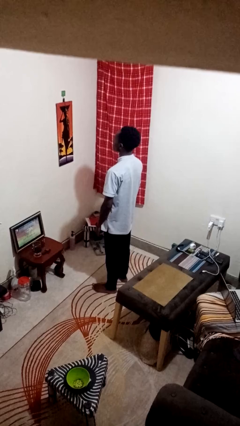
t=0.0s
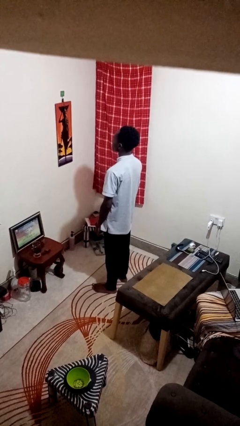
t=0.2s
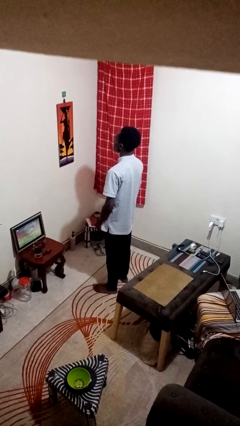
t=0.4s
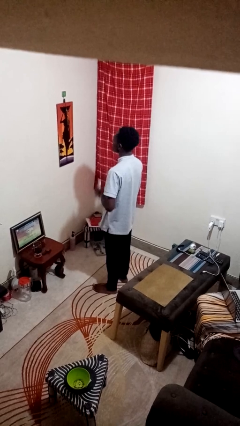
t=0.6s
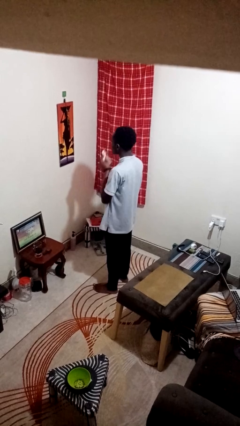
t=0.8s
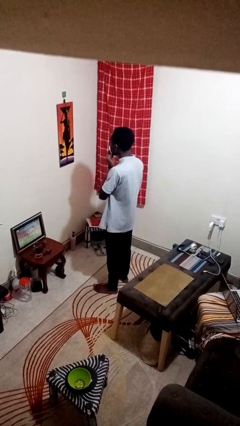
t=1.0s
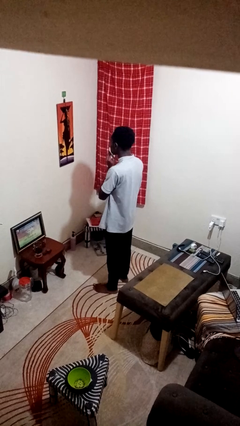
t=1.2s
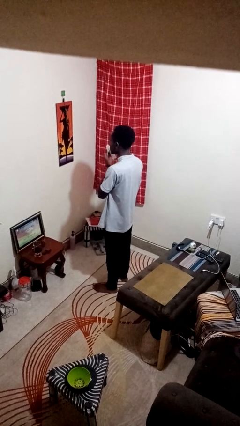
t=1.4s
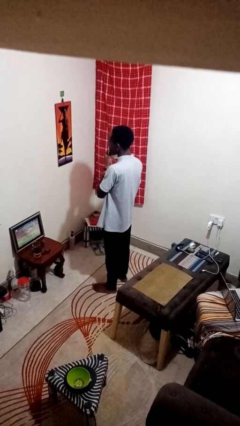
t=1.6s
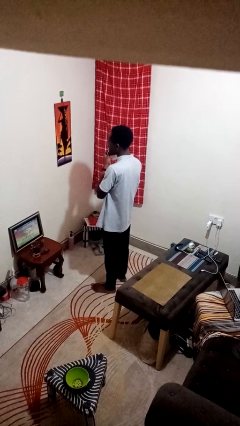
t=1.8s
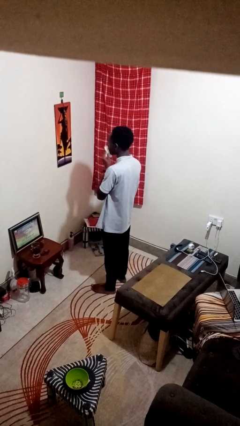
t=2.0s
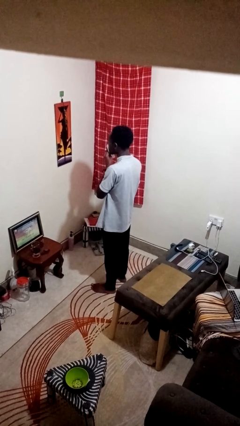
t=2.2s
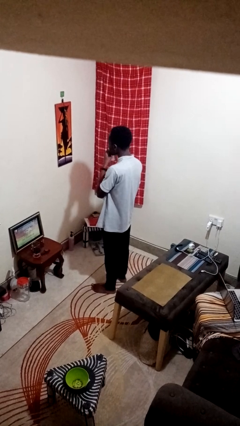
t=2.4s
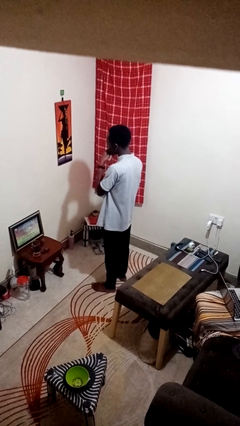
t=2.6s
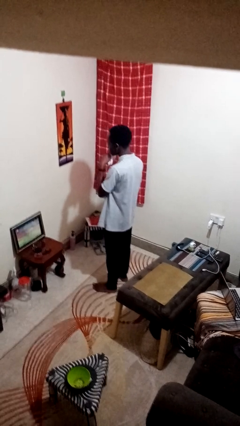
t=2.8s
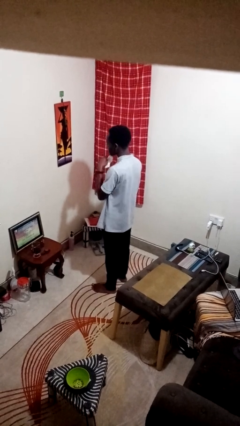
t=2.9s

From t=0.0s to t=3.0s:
person wipes mouth with napkin

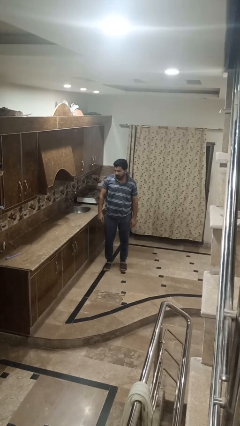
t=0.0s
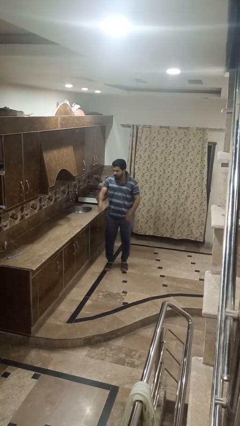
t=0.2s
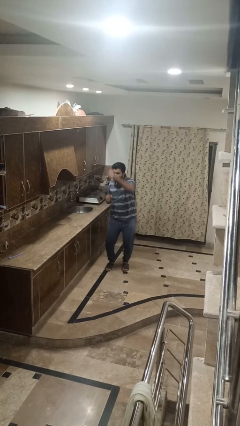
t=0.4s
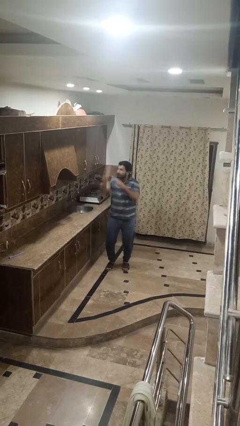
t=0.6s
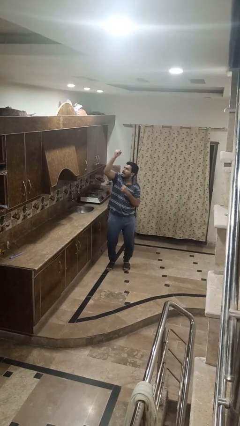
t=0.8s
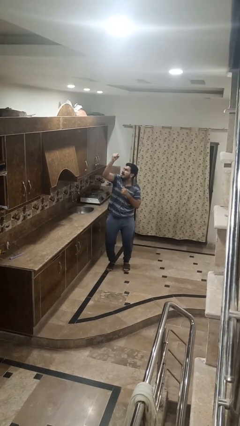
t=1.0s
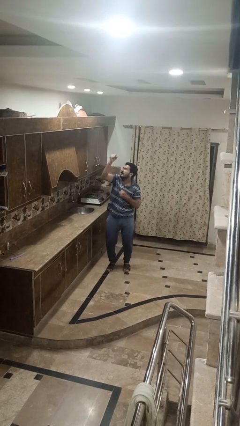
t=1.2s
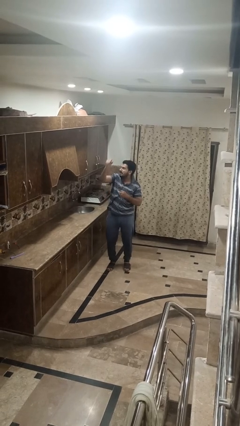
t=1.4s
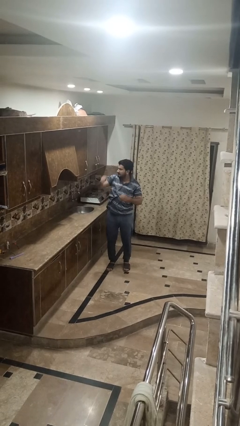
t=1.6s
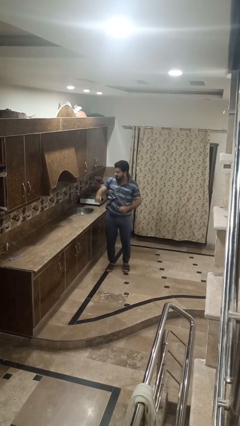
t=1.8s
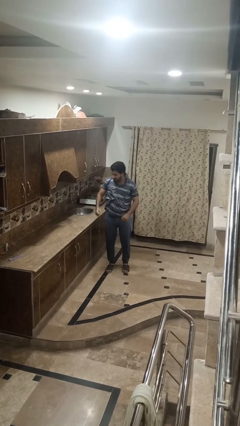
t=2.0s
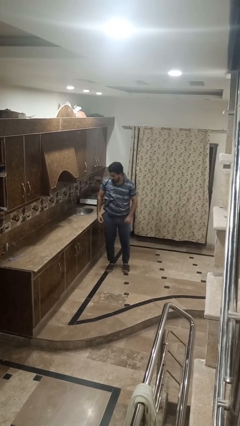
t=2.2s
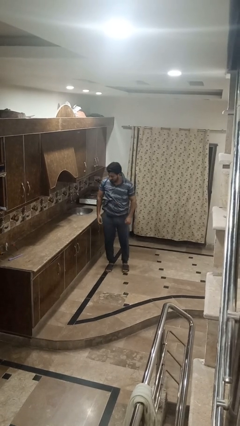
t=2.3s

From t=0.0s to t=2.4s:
person punches

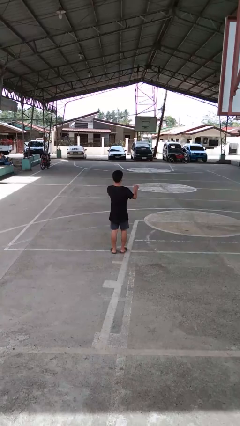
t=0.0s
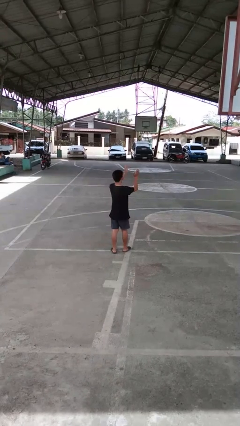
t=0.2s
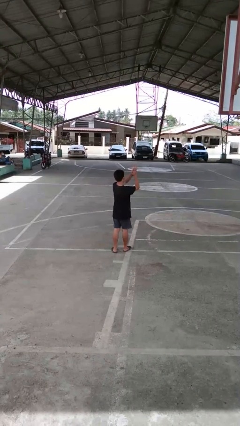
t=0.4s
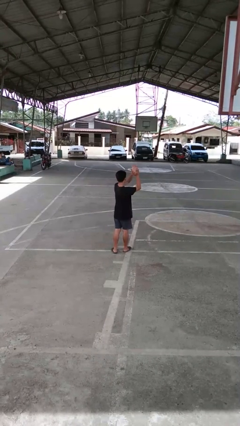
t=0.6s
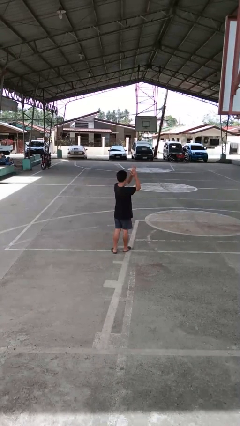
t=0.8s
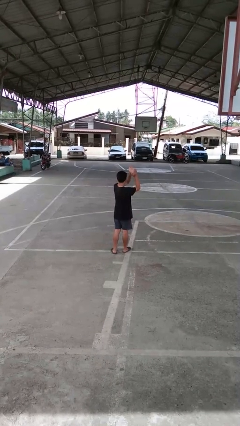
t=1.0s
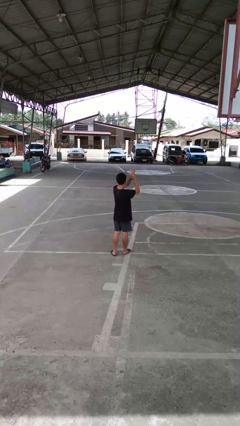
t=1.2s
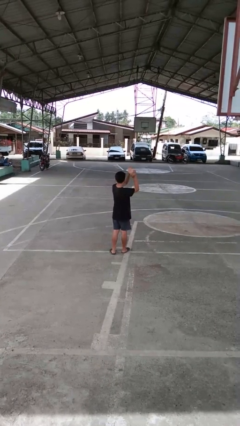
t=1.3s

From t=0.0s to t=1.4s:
person claps hands

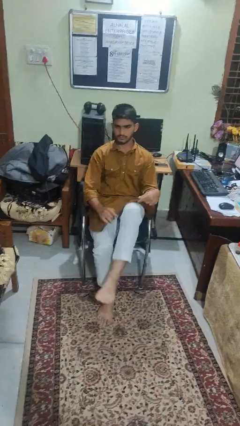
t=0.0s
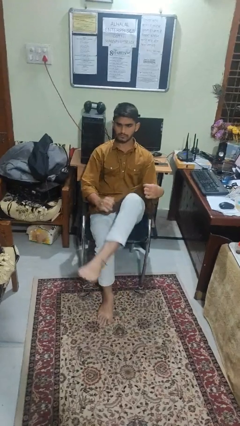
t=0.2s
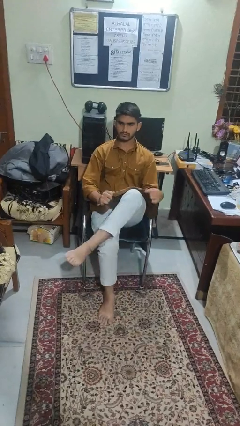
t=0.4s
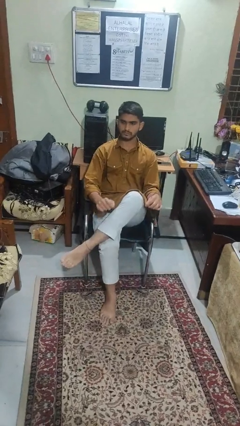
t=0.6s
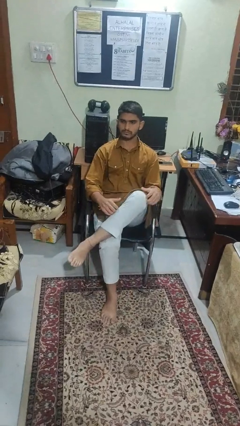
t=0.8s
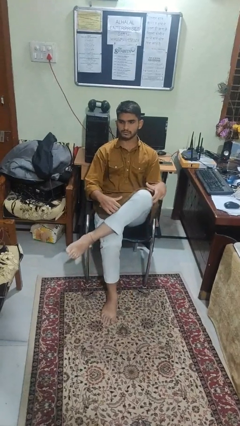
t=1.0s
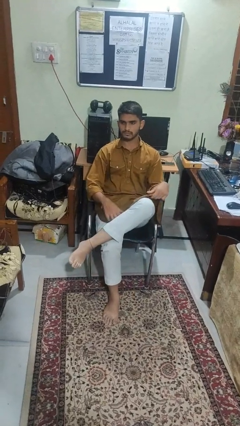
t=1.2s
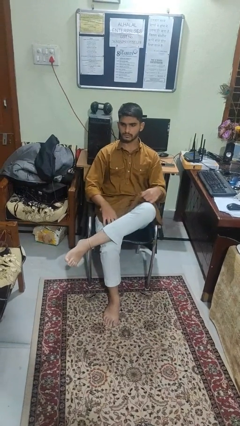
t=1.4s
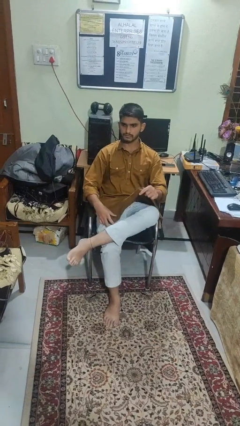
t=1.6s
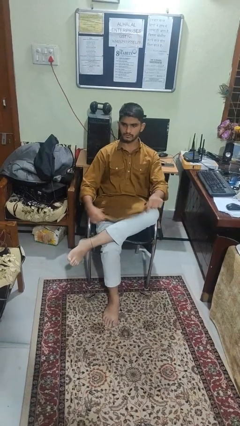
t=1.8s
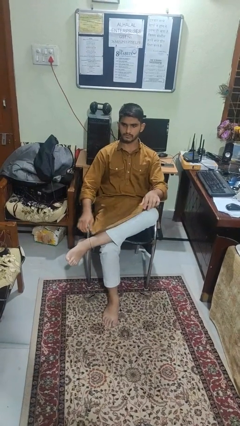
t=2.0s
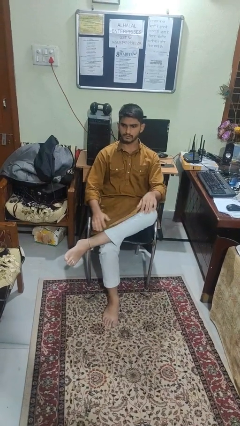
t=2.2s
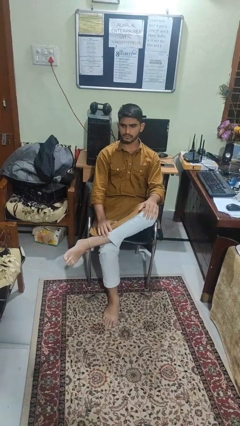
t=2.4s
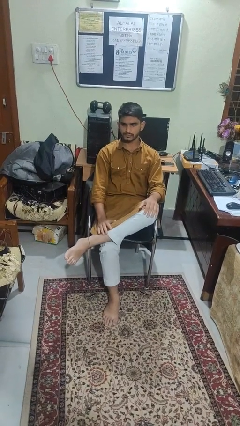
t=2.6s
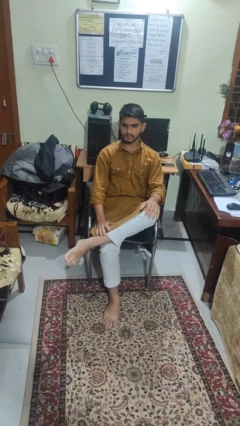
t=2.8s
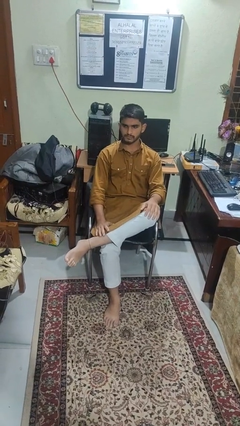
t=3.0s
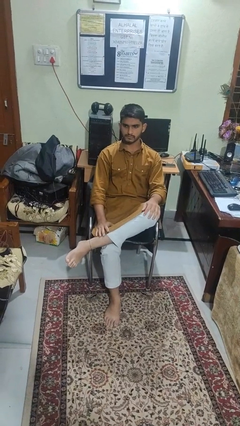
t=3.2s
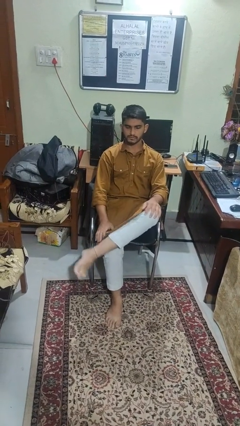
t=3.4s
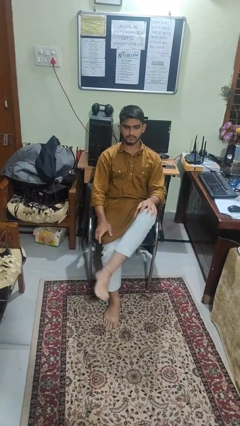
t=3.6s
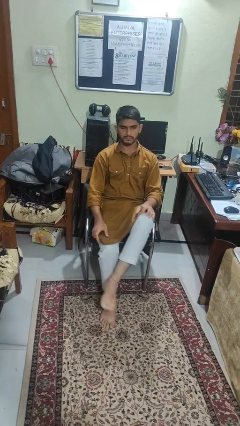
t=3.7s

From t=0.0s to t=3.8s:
person crosses legs

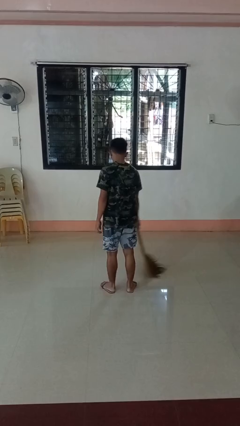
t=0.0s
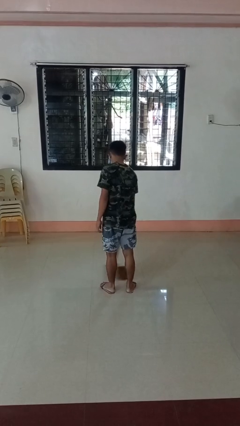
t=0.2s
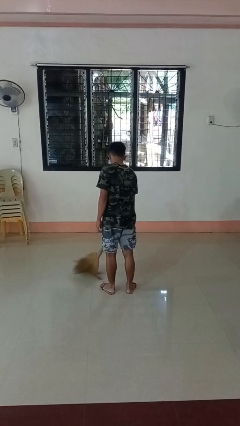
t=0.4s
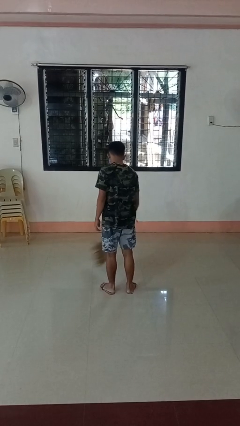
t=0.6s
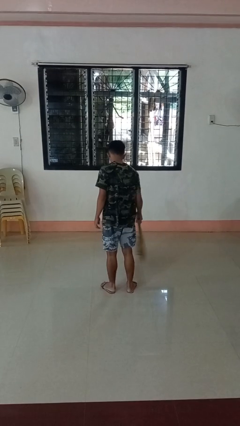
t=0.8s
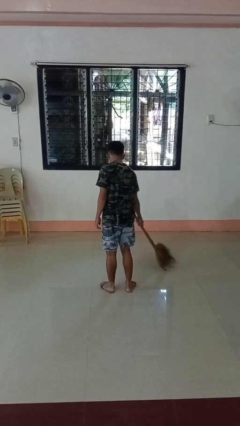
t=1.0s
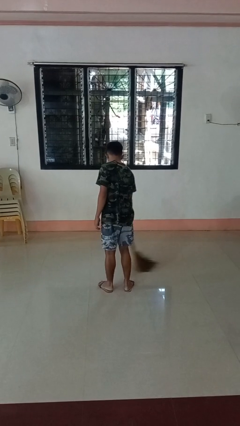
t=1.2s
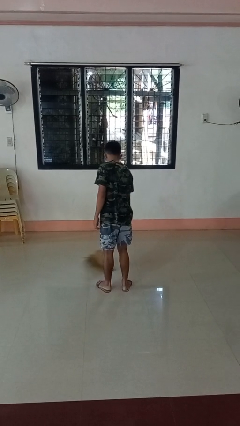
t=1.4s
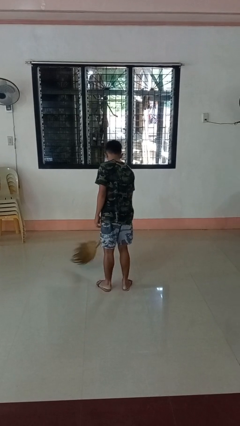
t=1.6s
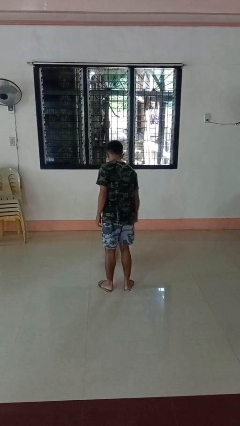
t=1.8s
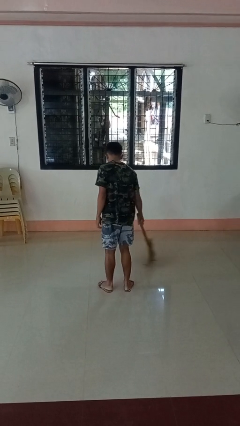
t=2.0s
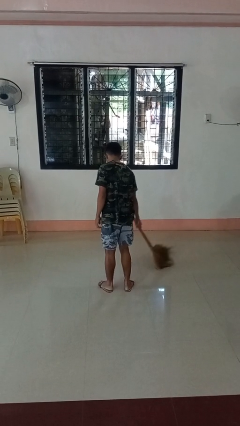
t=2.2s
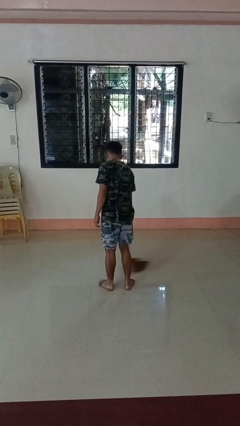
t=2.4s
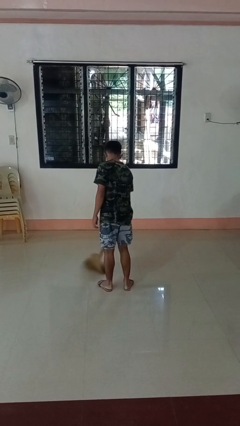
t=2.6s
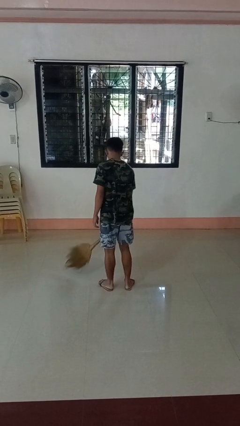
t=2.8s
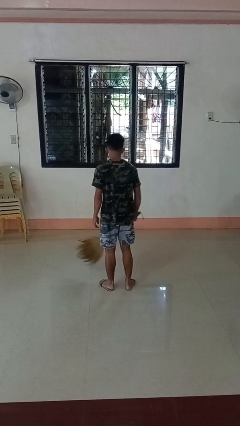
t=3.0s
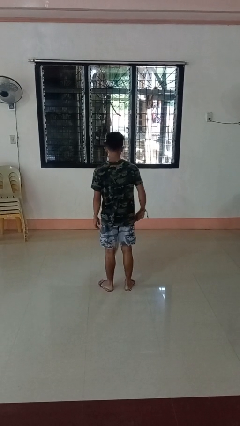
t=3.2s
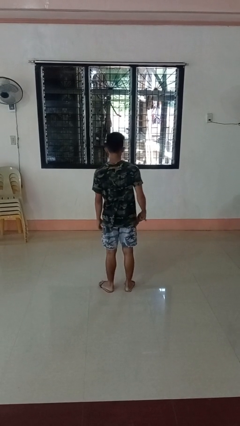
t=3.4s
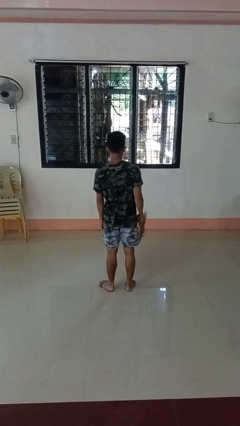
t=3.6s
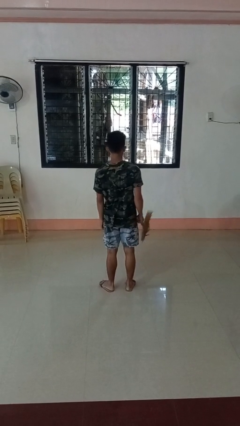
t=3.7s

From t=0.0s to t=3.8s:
person sweeps floor

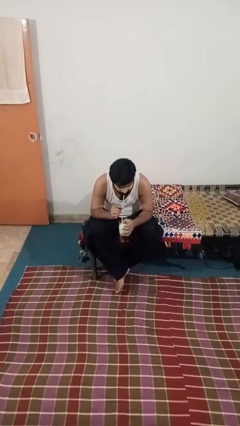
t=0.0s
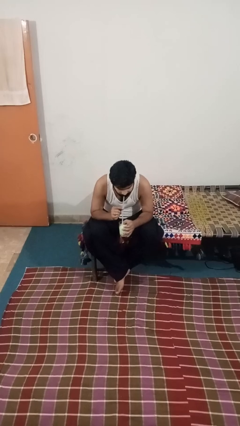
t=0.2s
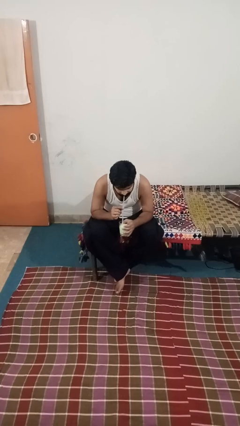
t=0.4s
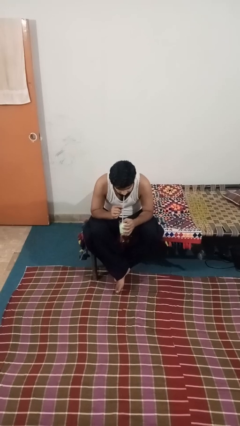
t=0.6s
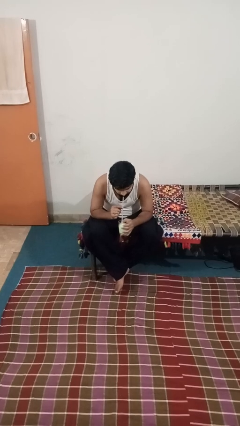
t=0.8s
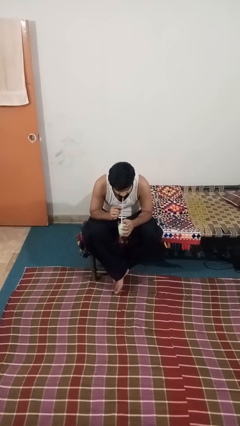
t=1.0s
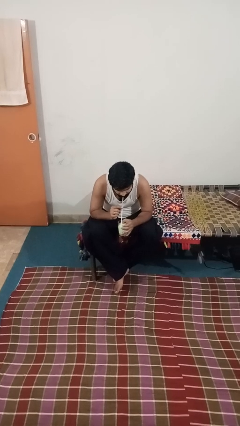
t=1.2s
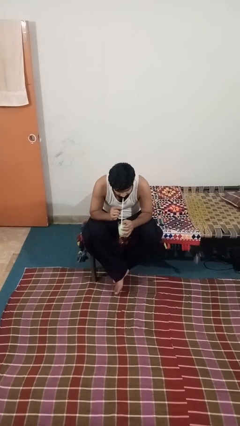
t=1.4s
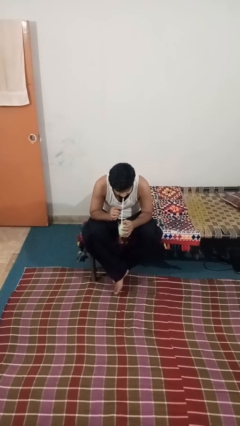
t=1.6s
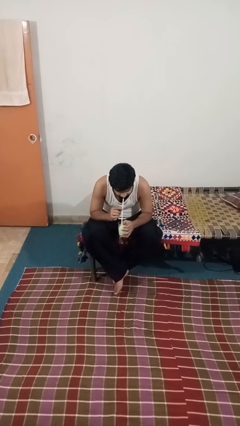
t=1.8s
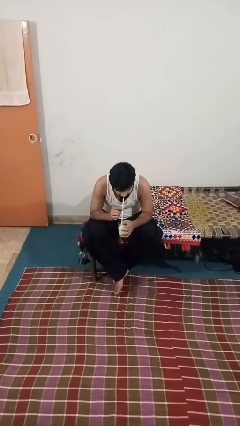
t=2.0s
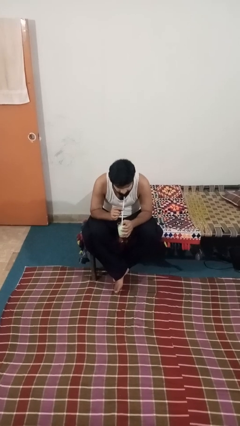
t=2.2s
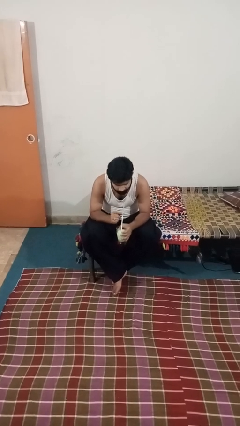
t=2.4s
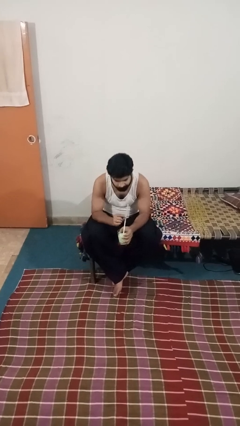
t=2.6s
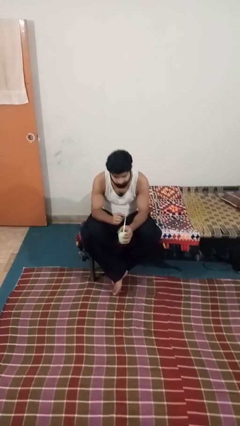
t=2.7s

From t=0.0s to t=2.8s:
person drinks from straw

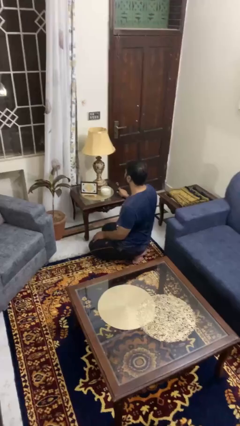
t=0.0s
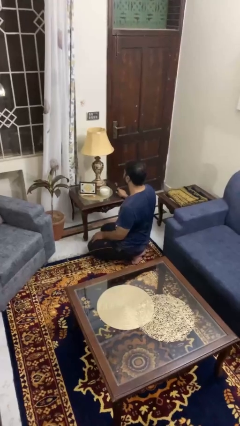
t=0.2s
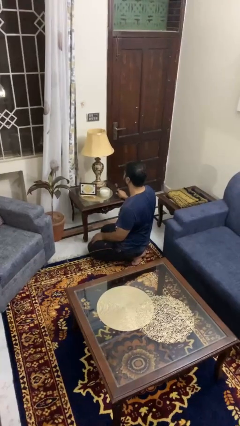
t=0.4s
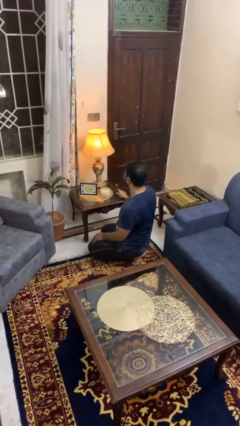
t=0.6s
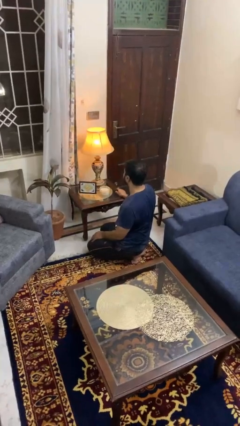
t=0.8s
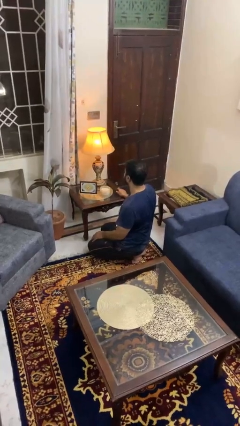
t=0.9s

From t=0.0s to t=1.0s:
person turns on lamp
